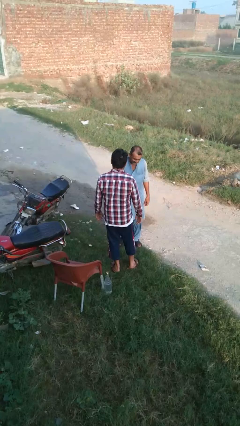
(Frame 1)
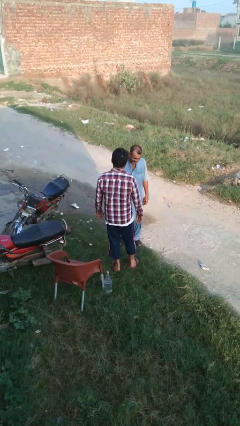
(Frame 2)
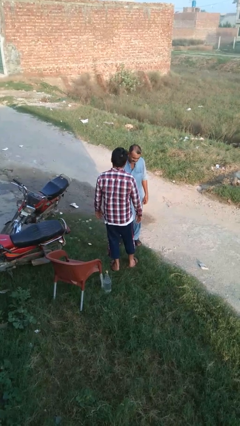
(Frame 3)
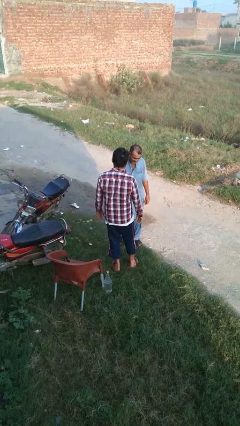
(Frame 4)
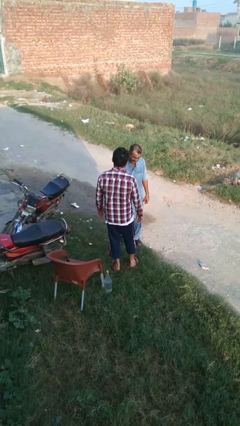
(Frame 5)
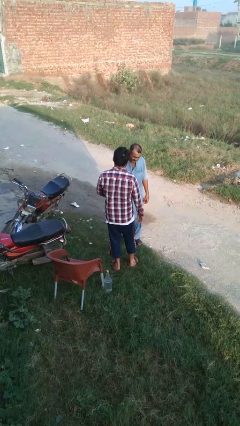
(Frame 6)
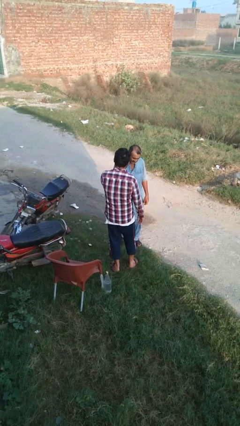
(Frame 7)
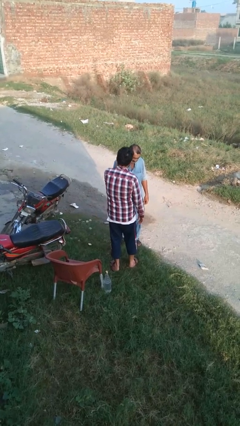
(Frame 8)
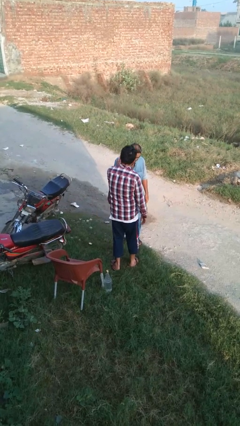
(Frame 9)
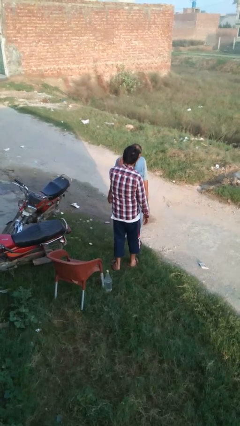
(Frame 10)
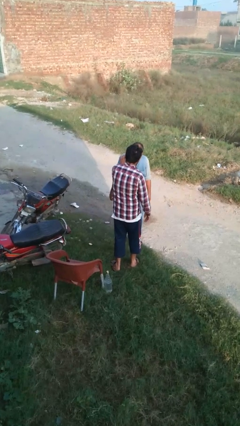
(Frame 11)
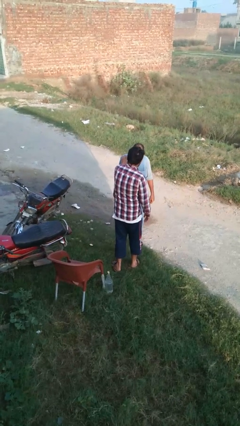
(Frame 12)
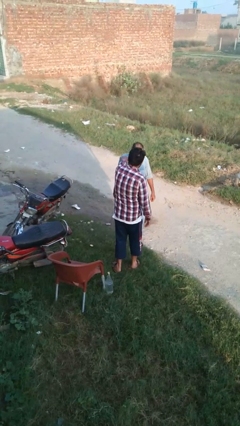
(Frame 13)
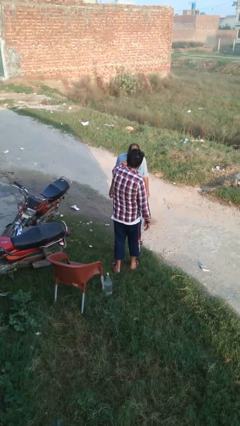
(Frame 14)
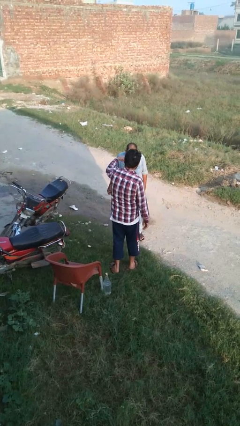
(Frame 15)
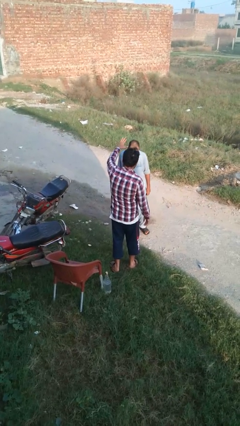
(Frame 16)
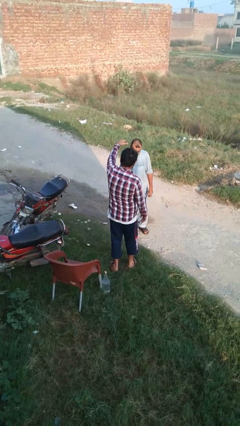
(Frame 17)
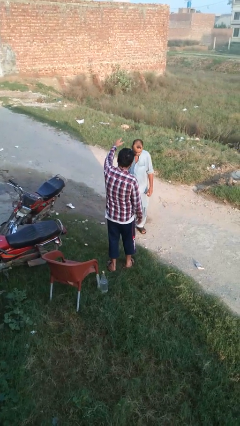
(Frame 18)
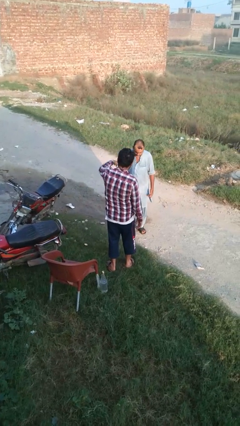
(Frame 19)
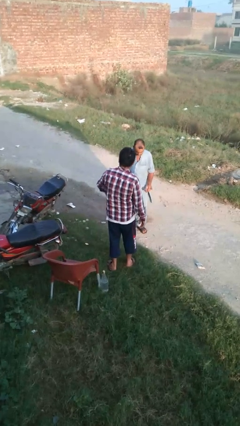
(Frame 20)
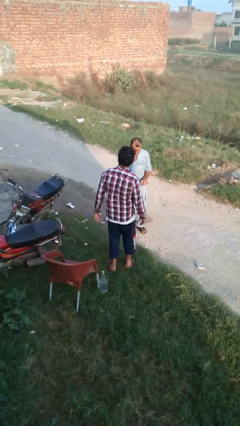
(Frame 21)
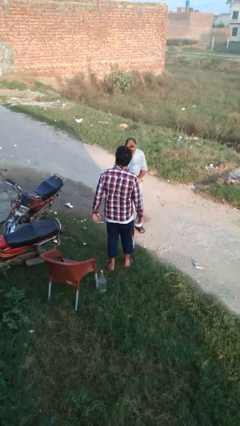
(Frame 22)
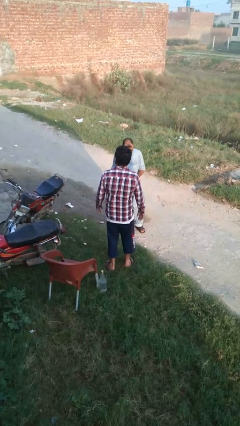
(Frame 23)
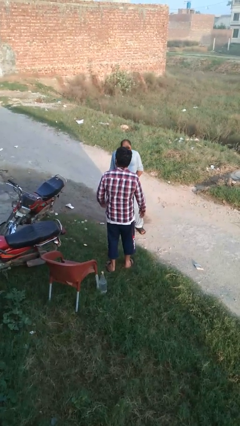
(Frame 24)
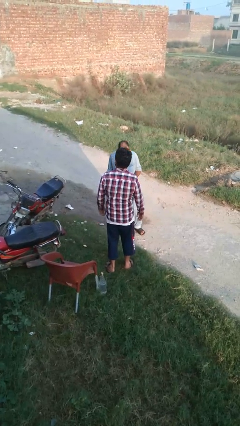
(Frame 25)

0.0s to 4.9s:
person shoves person

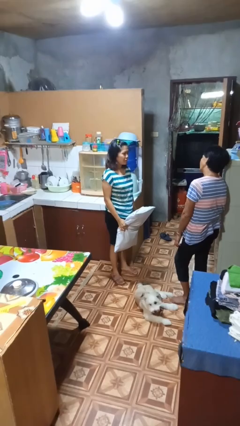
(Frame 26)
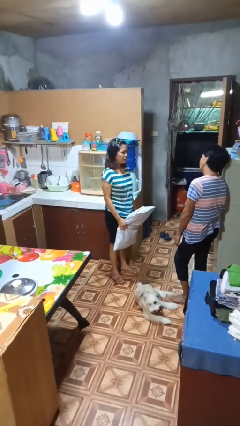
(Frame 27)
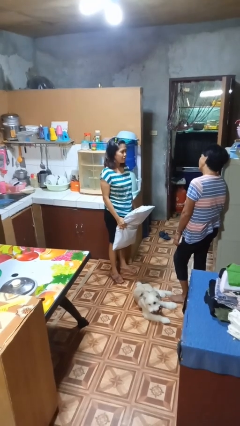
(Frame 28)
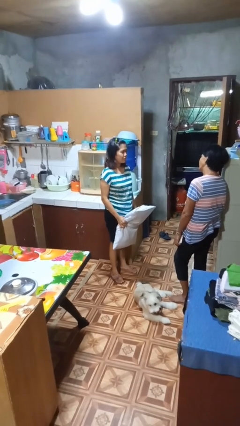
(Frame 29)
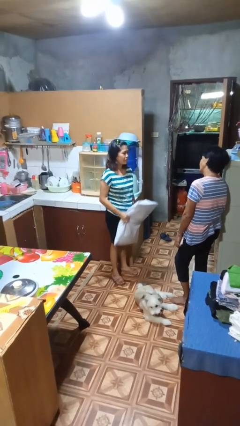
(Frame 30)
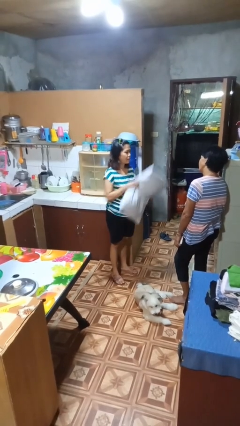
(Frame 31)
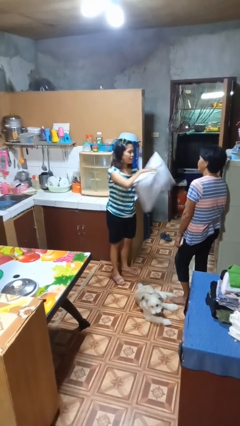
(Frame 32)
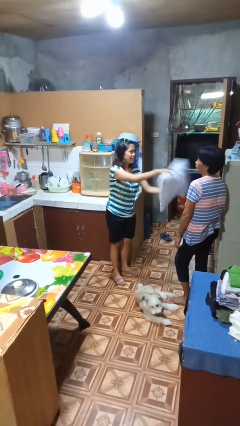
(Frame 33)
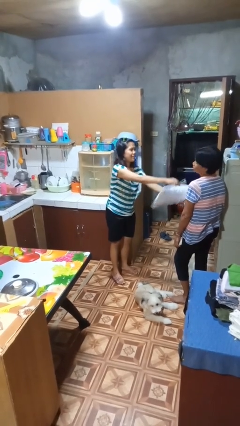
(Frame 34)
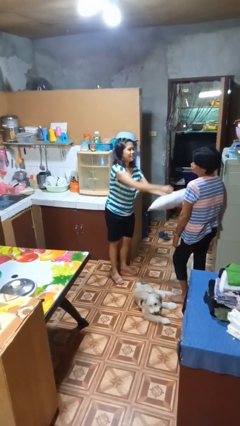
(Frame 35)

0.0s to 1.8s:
person hits person with pillow

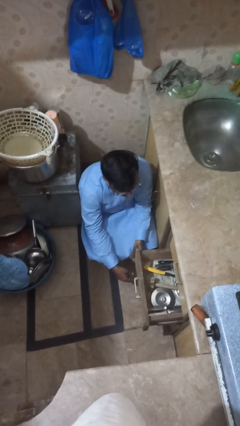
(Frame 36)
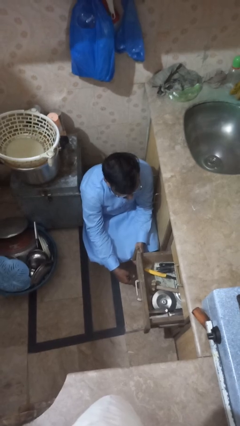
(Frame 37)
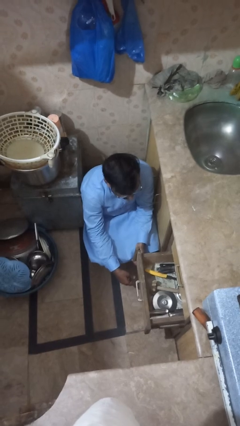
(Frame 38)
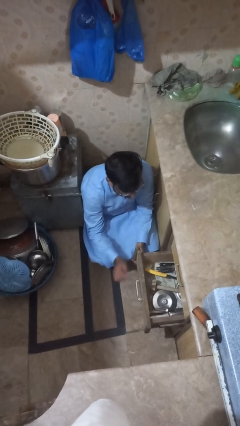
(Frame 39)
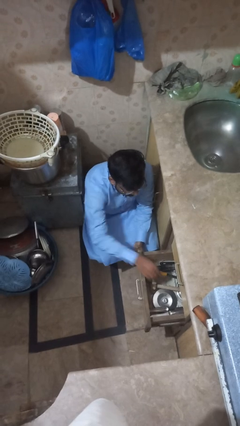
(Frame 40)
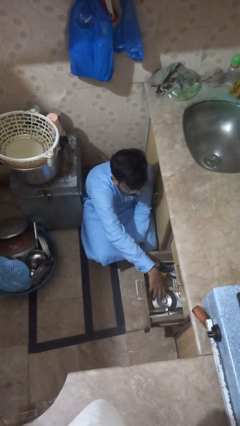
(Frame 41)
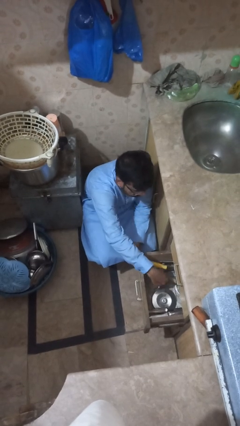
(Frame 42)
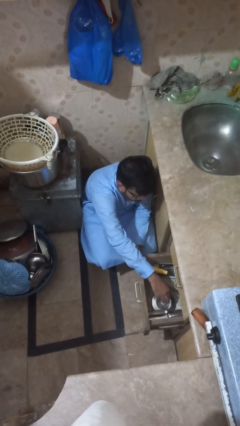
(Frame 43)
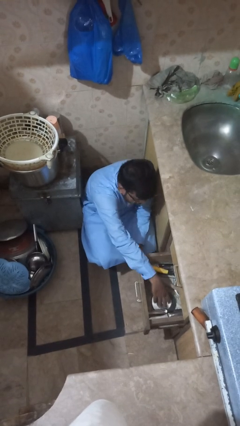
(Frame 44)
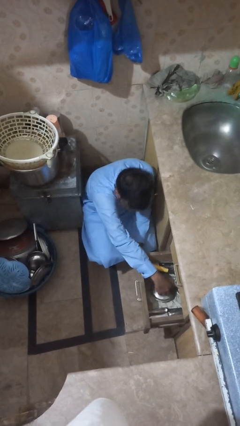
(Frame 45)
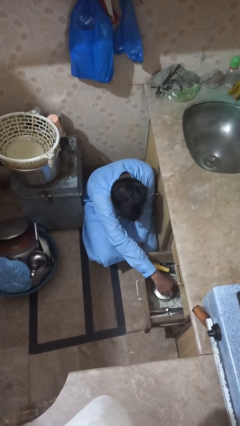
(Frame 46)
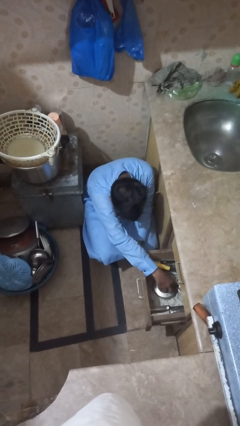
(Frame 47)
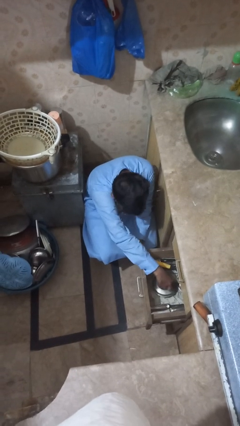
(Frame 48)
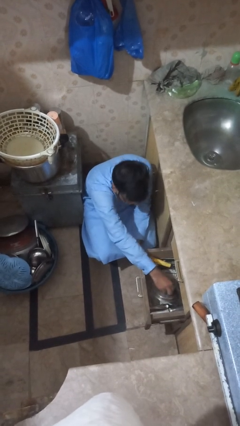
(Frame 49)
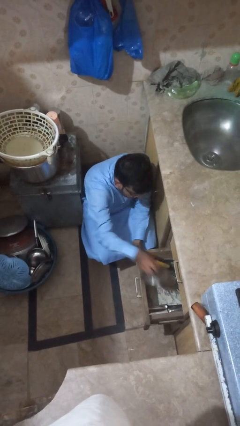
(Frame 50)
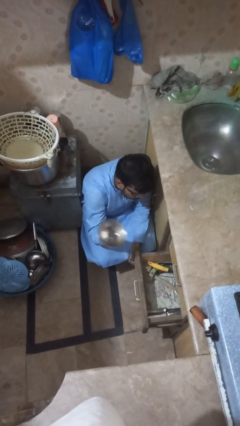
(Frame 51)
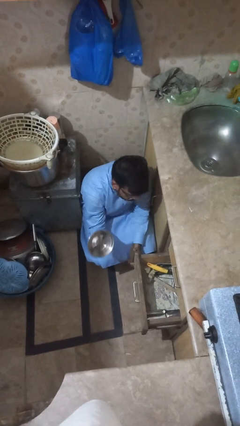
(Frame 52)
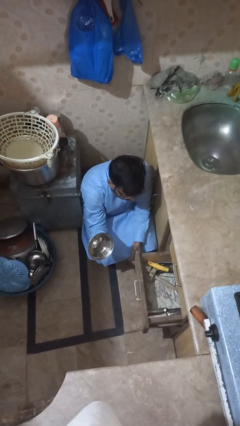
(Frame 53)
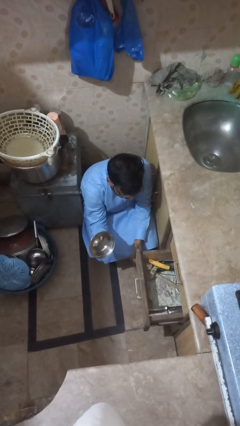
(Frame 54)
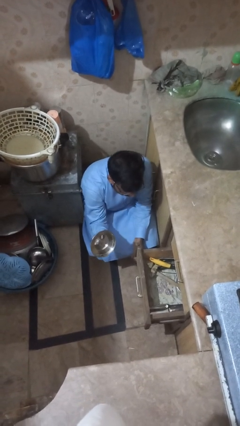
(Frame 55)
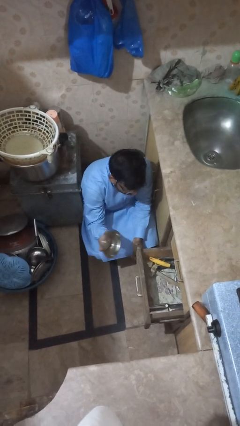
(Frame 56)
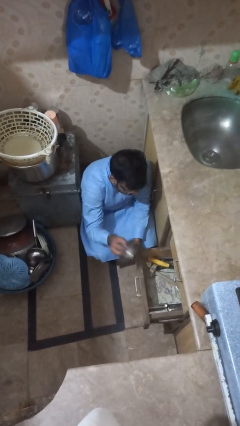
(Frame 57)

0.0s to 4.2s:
person searches in kitchen drawer

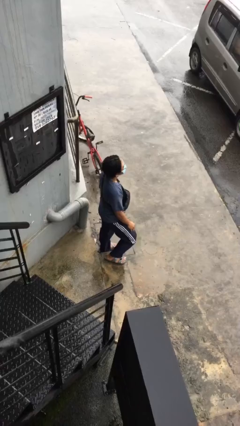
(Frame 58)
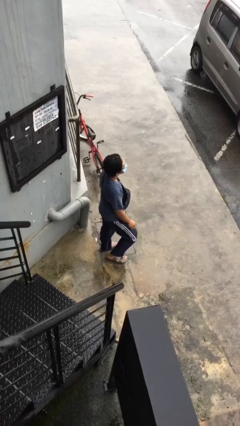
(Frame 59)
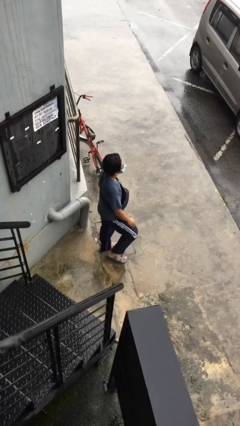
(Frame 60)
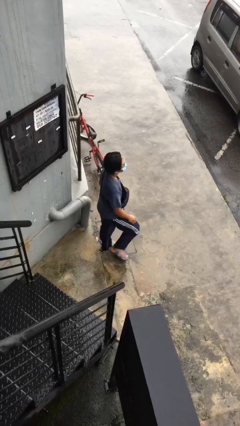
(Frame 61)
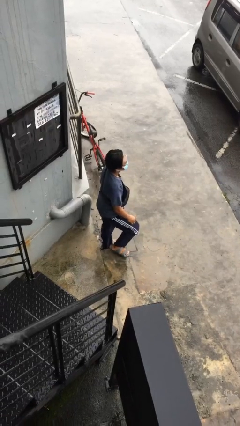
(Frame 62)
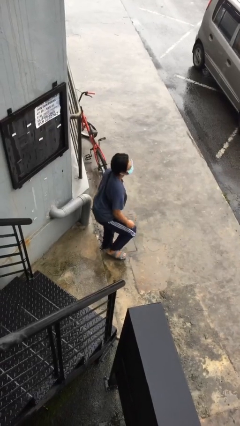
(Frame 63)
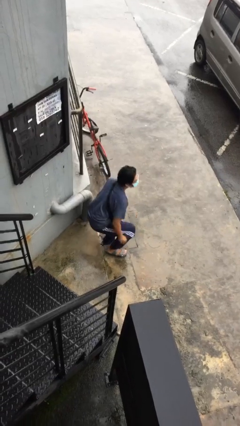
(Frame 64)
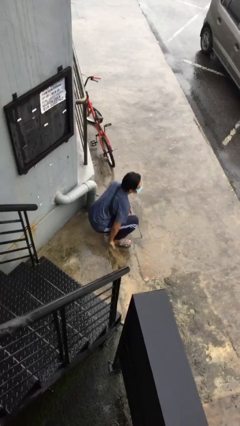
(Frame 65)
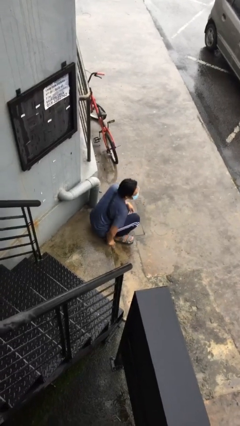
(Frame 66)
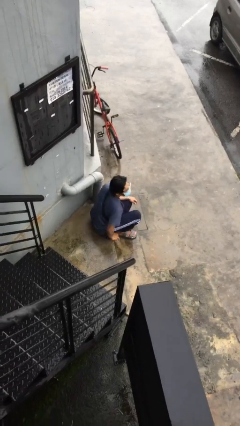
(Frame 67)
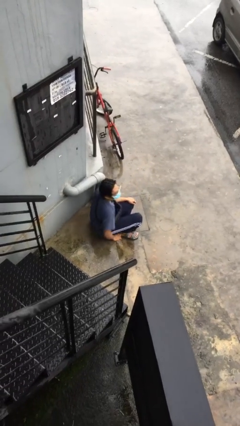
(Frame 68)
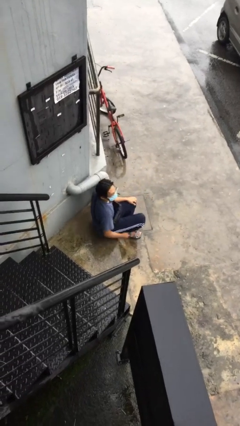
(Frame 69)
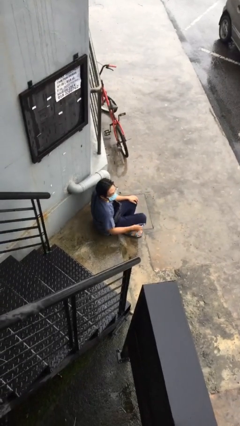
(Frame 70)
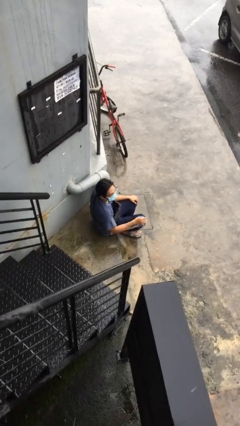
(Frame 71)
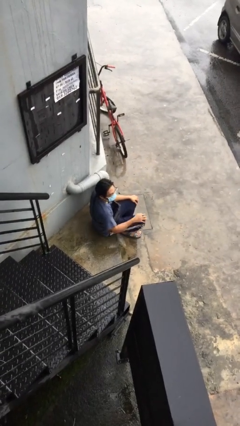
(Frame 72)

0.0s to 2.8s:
person sits down

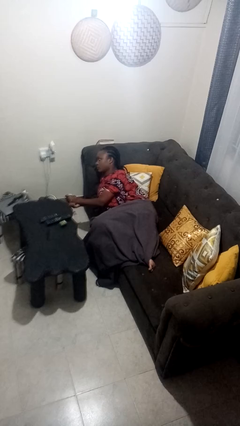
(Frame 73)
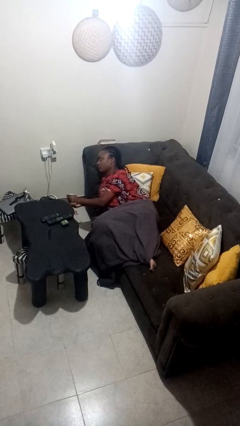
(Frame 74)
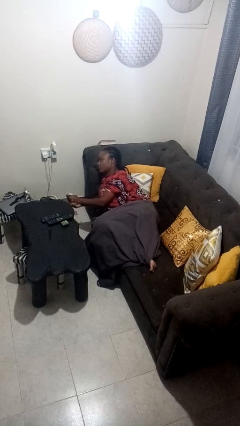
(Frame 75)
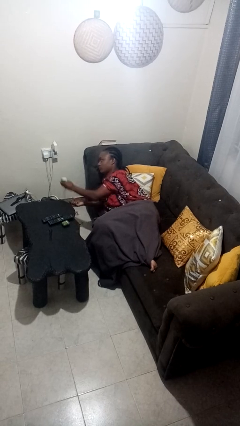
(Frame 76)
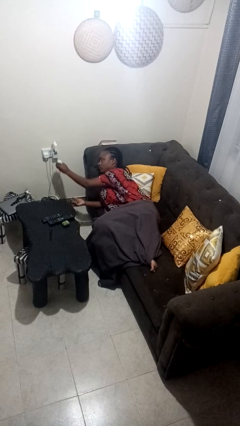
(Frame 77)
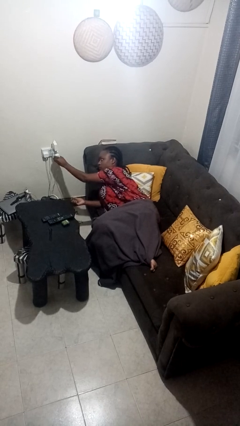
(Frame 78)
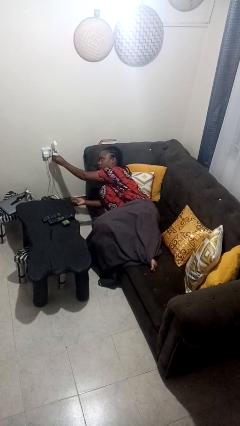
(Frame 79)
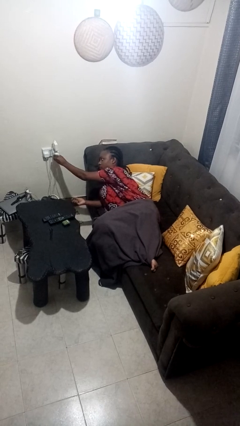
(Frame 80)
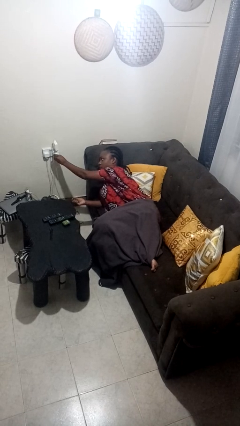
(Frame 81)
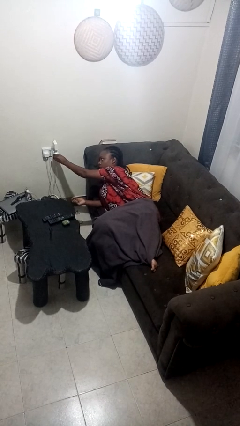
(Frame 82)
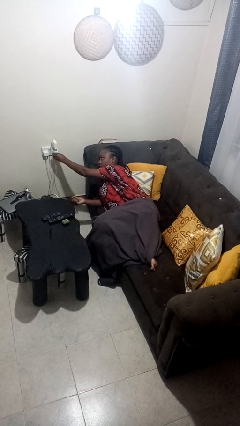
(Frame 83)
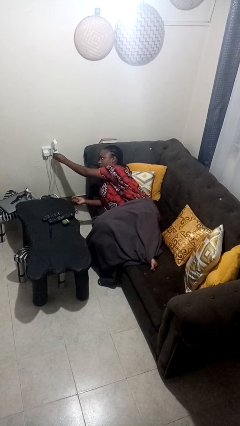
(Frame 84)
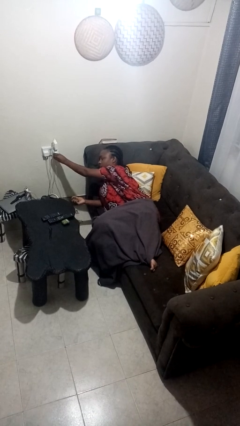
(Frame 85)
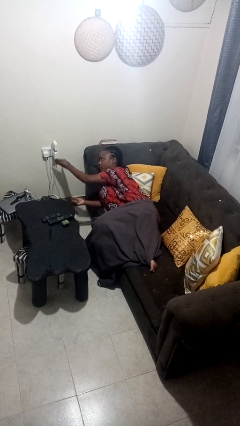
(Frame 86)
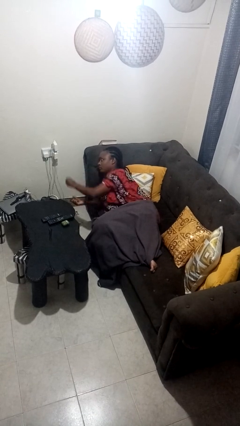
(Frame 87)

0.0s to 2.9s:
person plugs into electrical socket

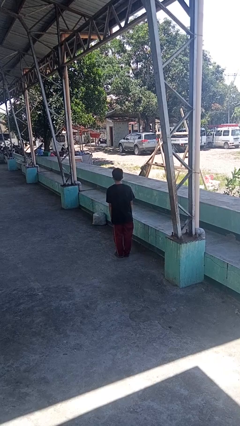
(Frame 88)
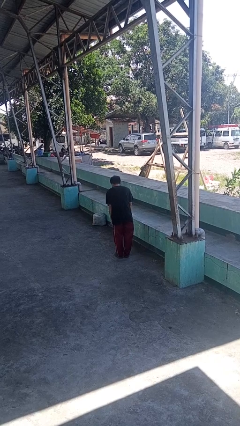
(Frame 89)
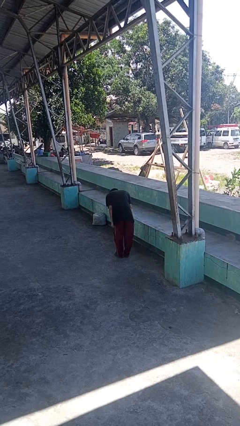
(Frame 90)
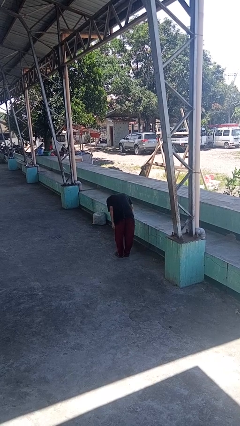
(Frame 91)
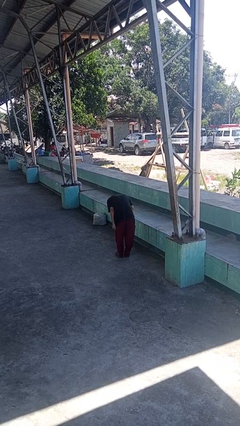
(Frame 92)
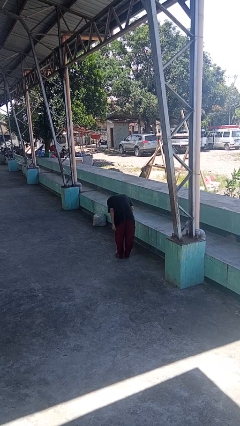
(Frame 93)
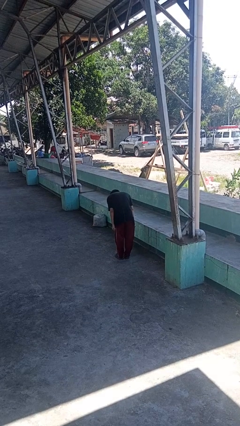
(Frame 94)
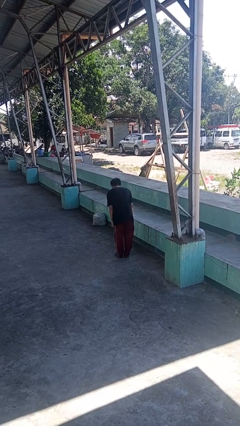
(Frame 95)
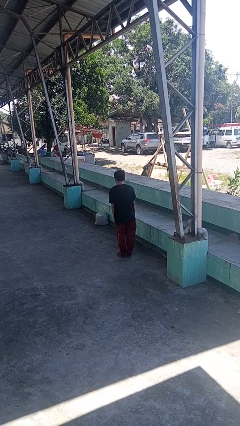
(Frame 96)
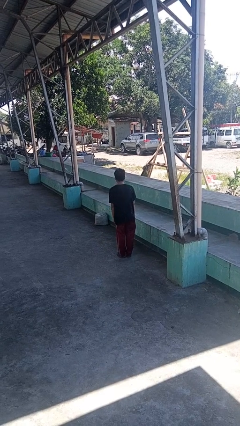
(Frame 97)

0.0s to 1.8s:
person bows
